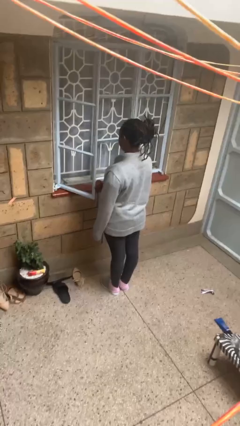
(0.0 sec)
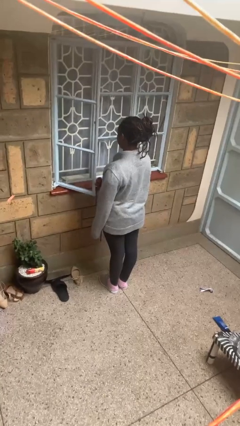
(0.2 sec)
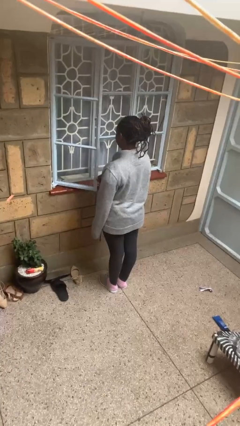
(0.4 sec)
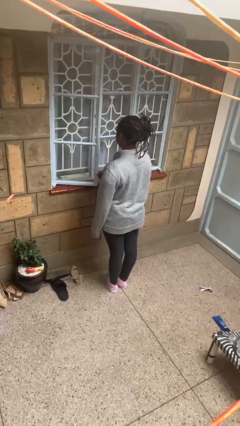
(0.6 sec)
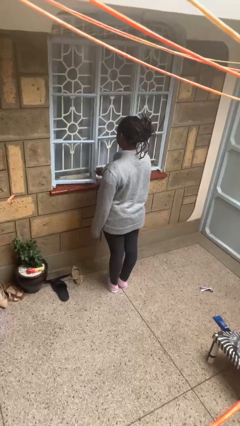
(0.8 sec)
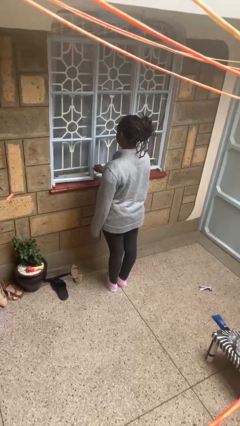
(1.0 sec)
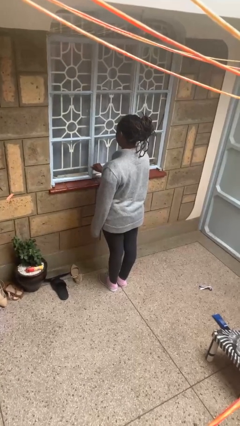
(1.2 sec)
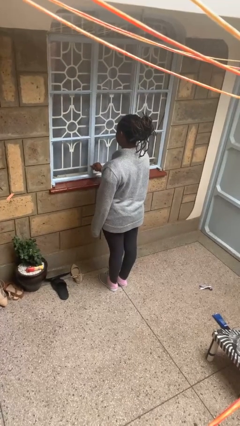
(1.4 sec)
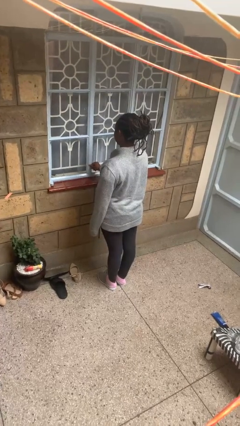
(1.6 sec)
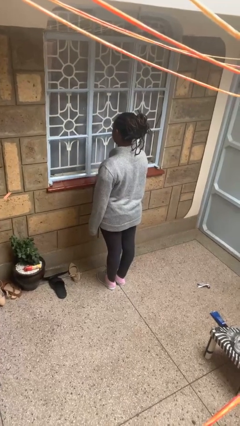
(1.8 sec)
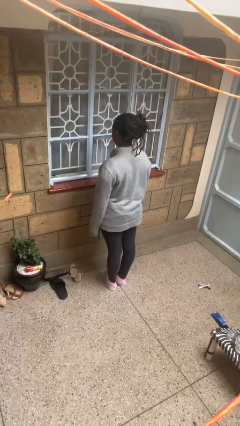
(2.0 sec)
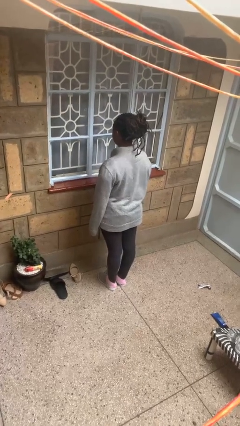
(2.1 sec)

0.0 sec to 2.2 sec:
person closes home window

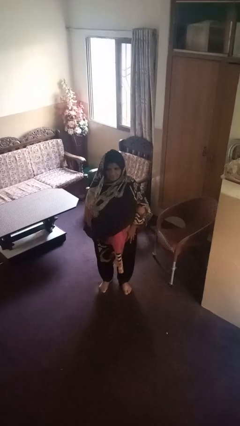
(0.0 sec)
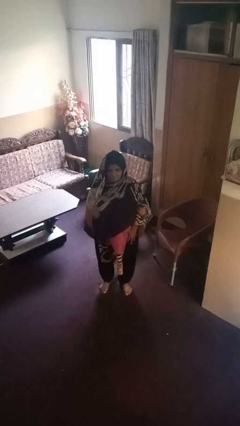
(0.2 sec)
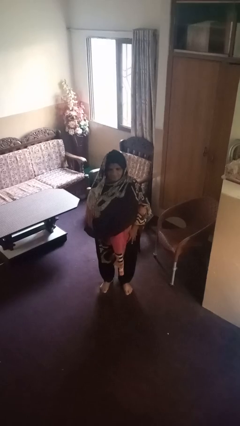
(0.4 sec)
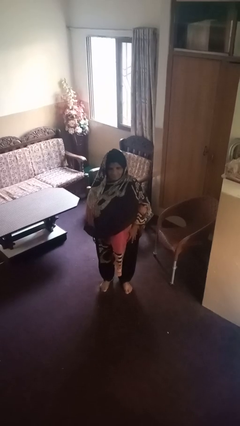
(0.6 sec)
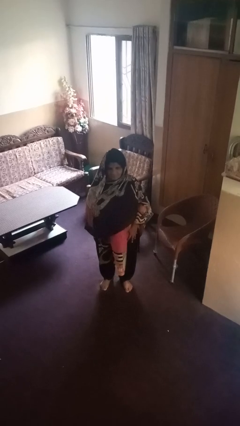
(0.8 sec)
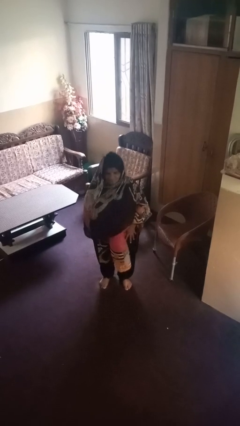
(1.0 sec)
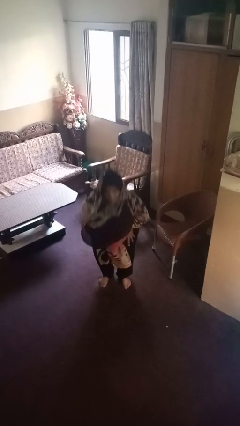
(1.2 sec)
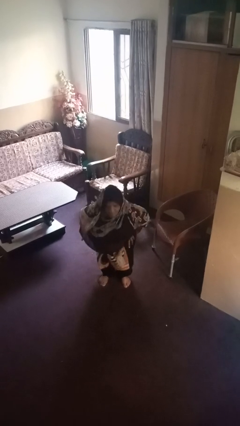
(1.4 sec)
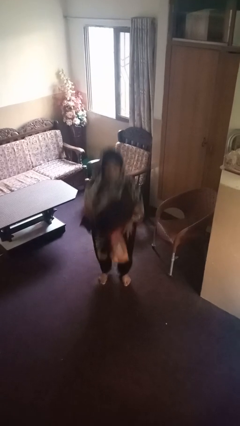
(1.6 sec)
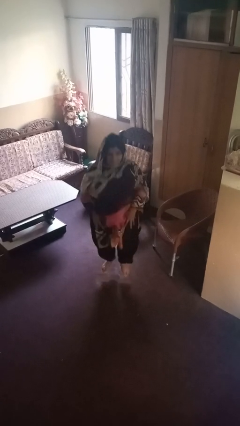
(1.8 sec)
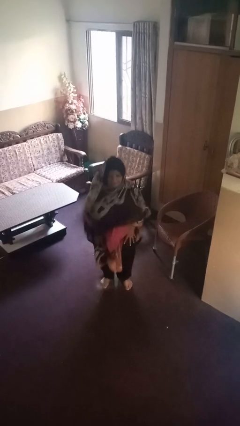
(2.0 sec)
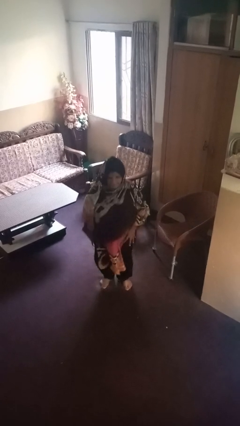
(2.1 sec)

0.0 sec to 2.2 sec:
person jumps

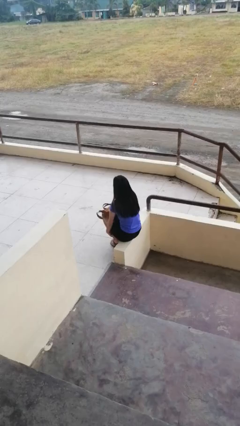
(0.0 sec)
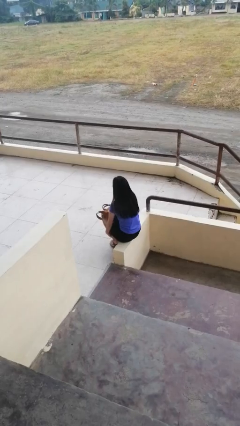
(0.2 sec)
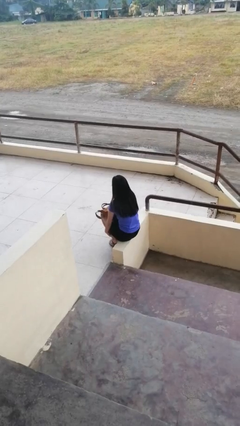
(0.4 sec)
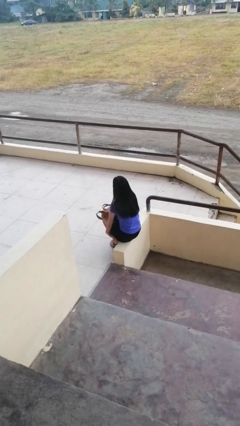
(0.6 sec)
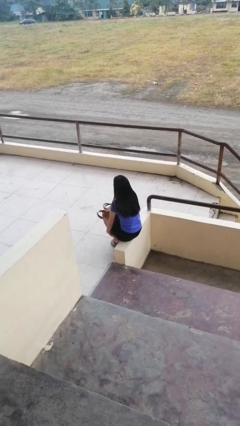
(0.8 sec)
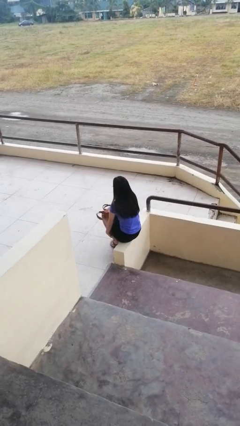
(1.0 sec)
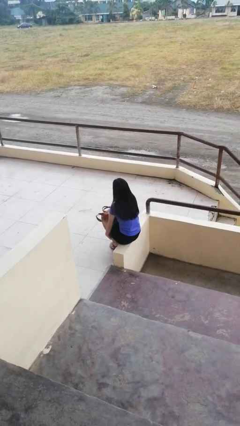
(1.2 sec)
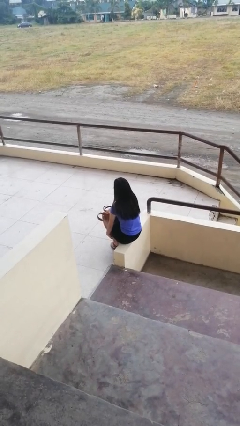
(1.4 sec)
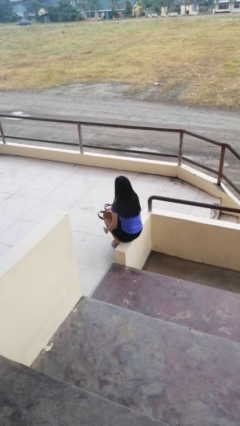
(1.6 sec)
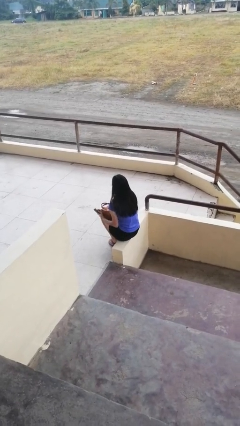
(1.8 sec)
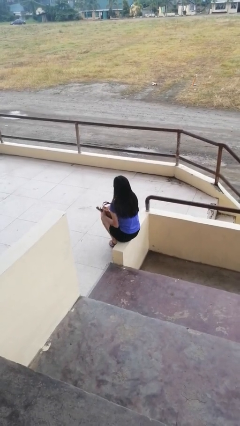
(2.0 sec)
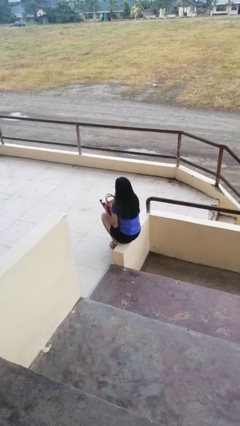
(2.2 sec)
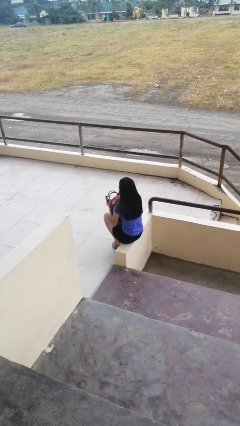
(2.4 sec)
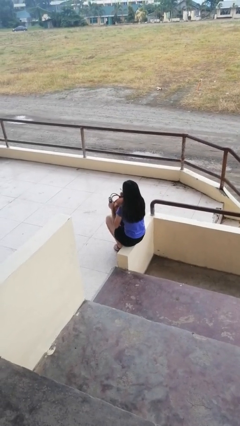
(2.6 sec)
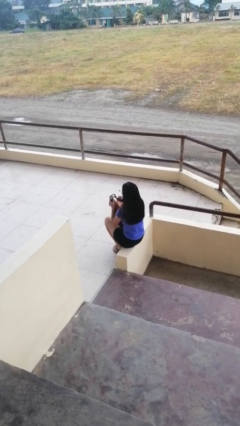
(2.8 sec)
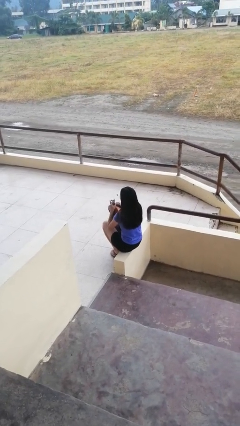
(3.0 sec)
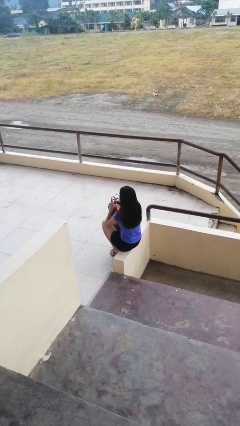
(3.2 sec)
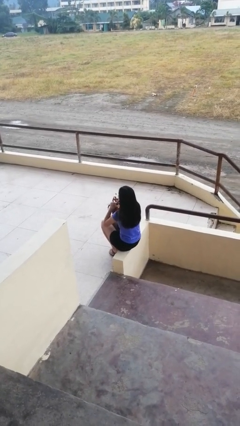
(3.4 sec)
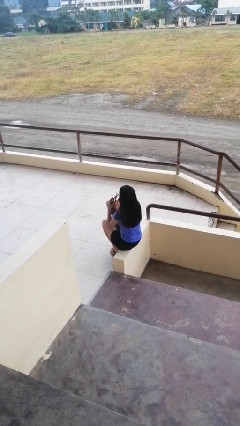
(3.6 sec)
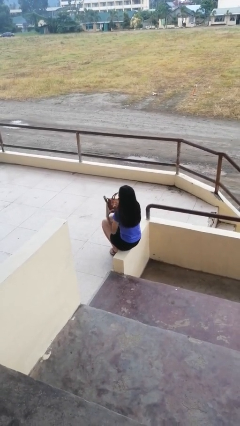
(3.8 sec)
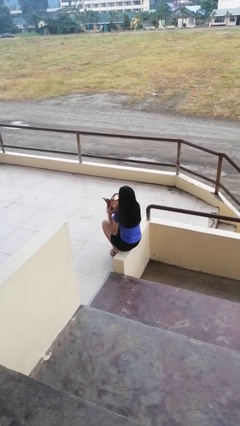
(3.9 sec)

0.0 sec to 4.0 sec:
person squeezes object

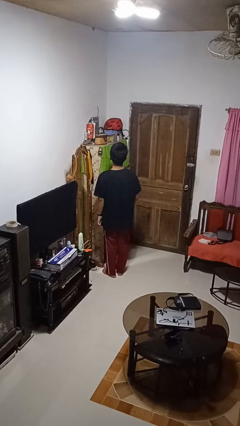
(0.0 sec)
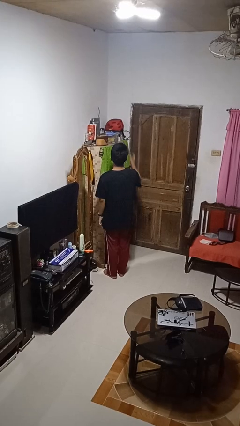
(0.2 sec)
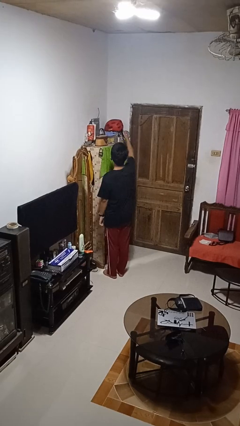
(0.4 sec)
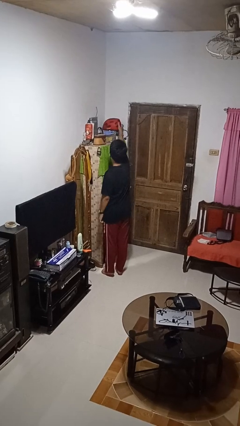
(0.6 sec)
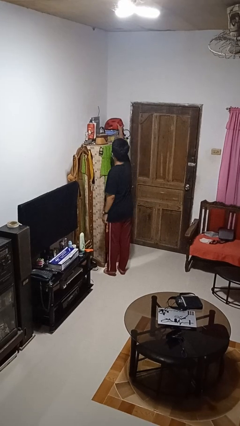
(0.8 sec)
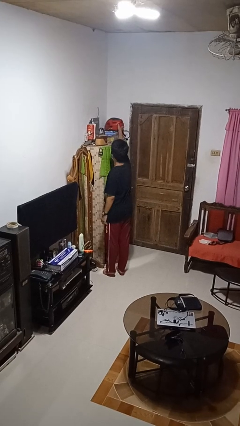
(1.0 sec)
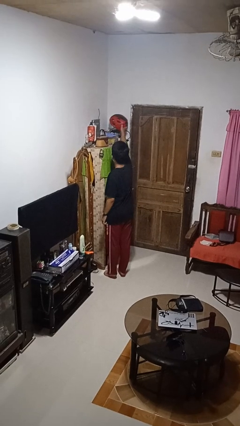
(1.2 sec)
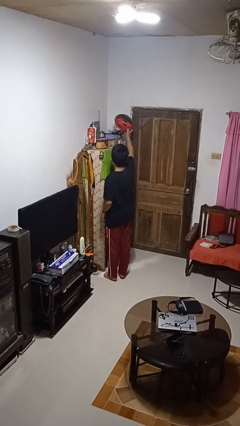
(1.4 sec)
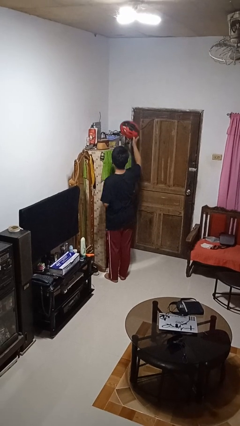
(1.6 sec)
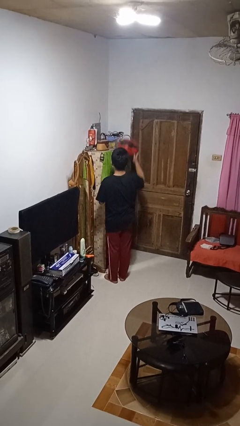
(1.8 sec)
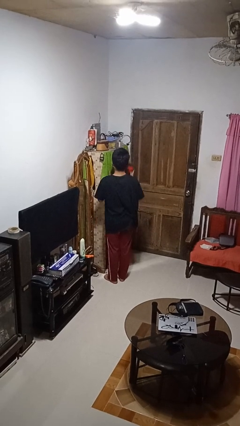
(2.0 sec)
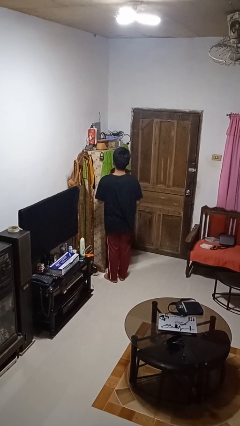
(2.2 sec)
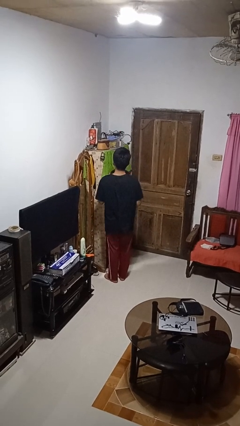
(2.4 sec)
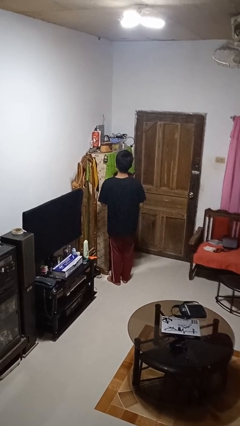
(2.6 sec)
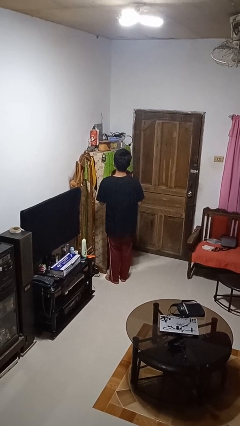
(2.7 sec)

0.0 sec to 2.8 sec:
person picks up object from shelf

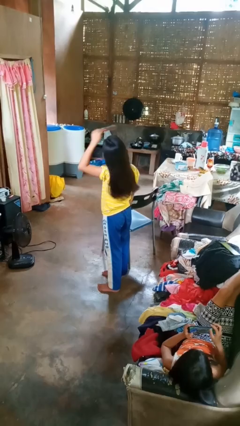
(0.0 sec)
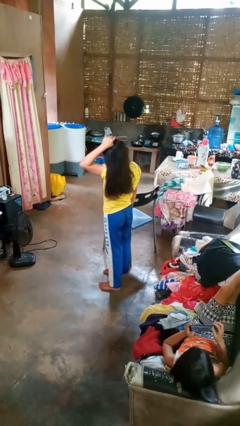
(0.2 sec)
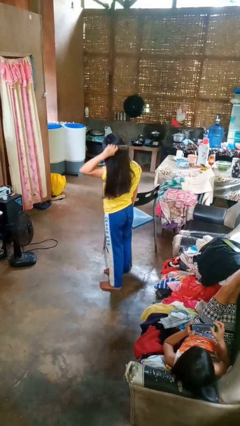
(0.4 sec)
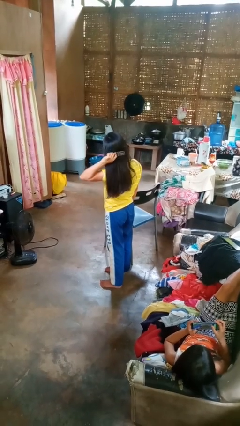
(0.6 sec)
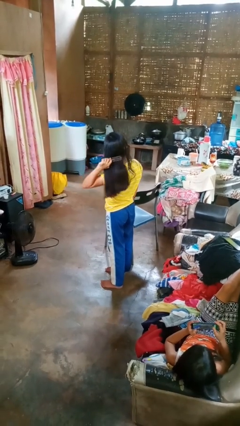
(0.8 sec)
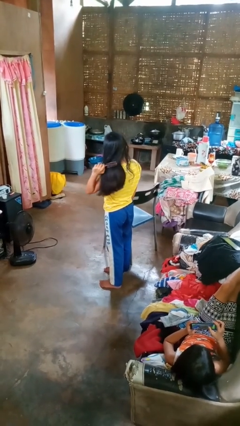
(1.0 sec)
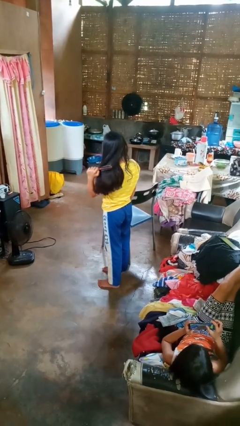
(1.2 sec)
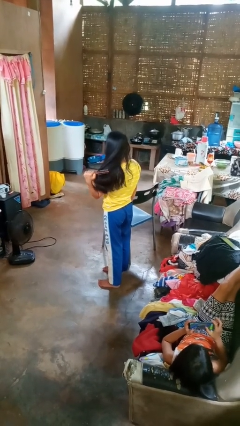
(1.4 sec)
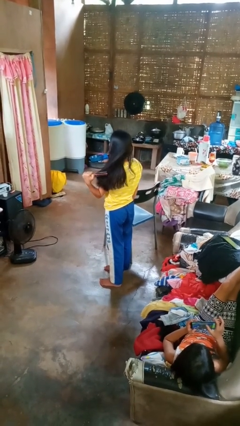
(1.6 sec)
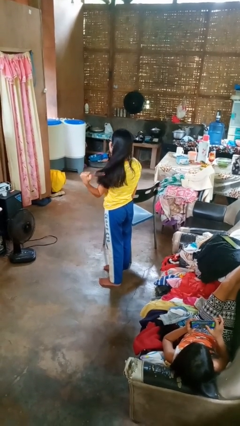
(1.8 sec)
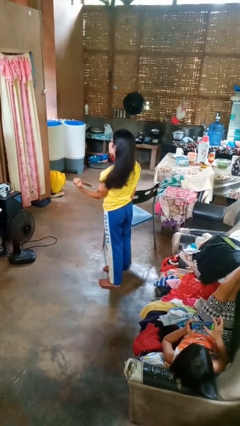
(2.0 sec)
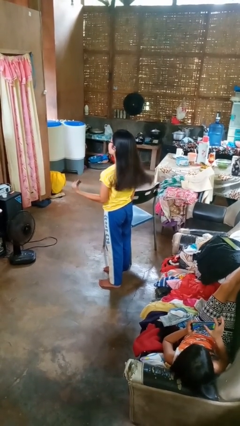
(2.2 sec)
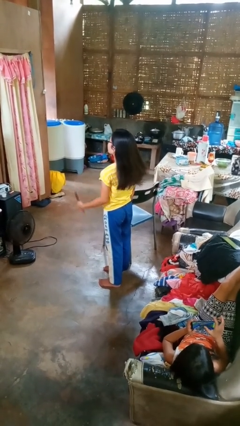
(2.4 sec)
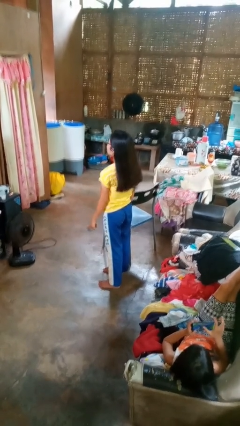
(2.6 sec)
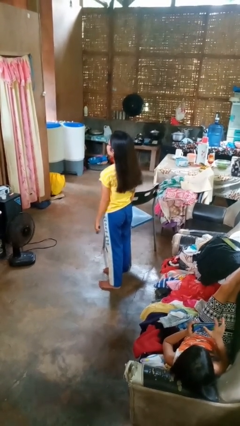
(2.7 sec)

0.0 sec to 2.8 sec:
person brushes hair

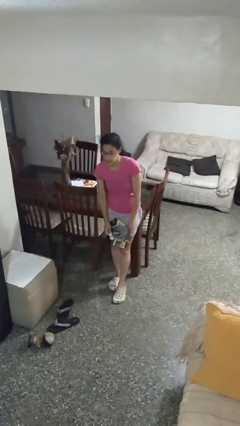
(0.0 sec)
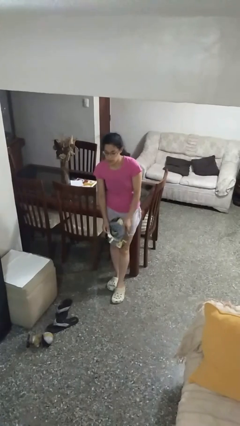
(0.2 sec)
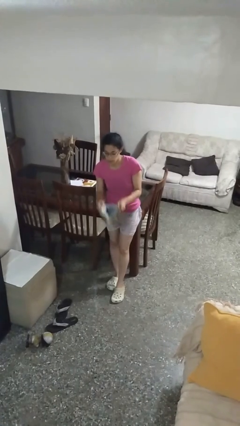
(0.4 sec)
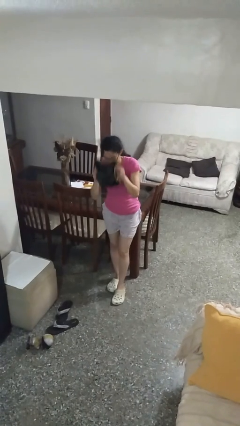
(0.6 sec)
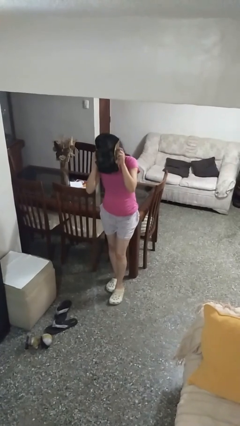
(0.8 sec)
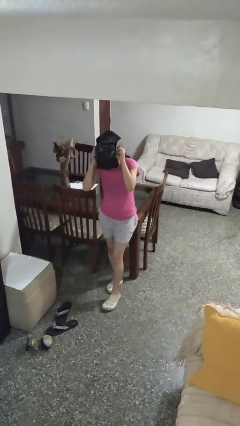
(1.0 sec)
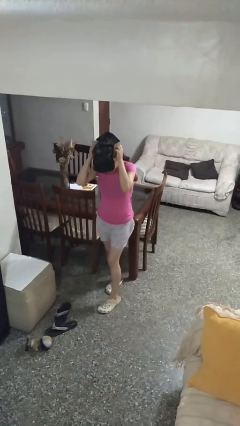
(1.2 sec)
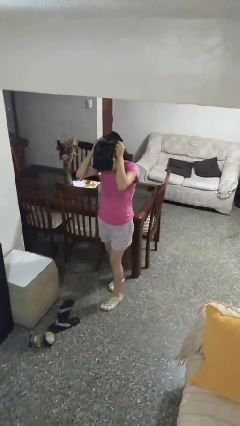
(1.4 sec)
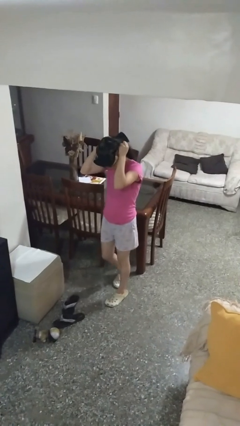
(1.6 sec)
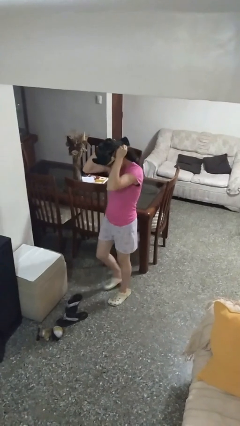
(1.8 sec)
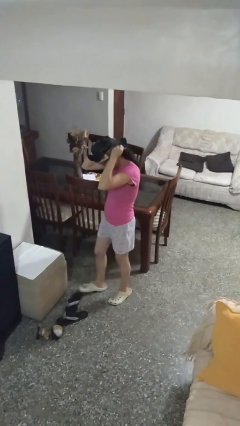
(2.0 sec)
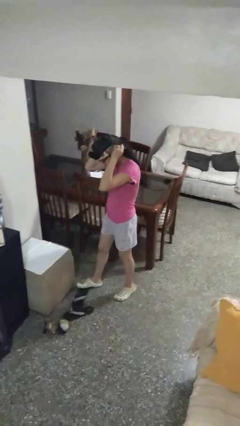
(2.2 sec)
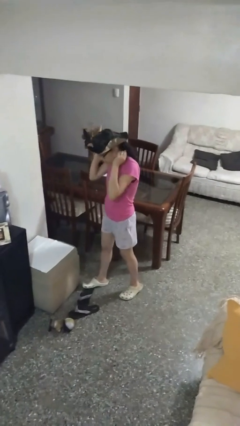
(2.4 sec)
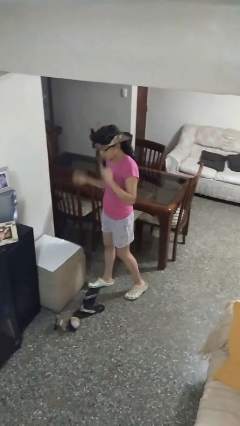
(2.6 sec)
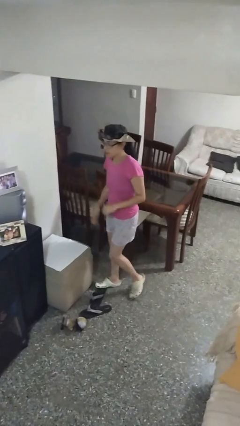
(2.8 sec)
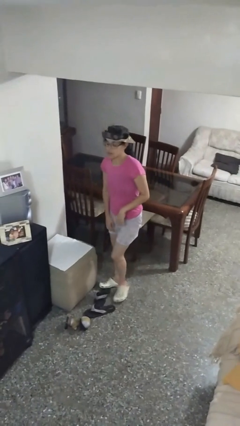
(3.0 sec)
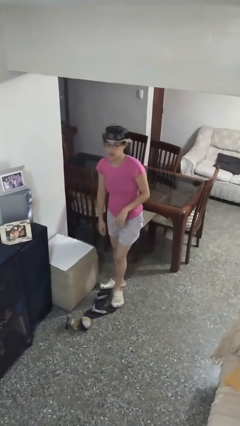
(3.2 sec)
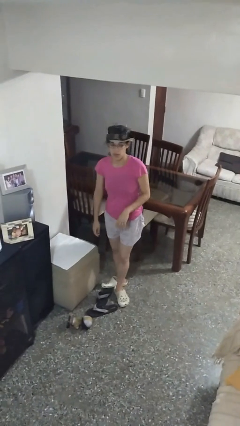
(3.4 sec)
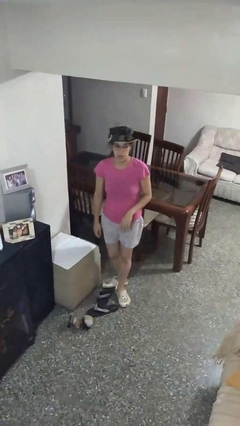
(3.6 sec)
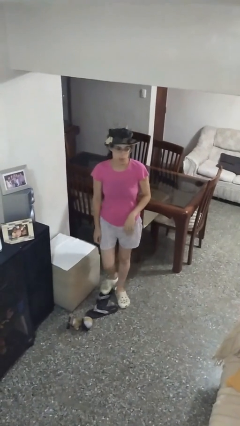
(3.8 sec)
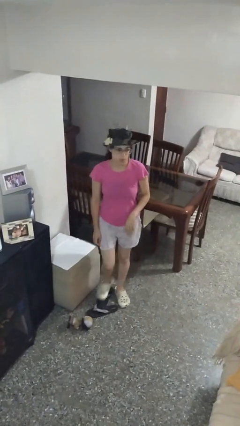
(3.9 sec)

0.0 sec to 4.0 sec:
person puts on hat
